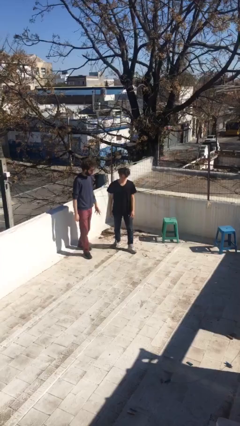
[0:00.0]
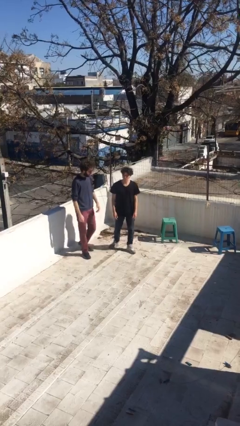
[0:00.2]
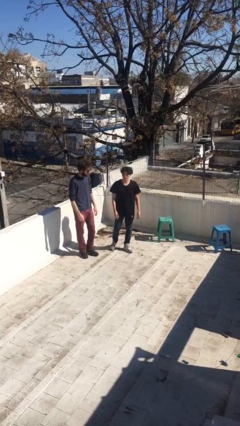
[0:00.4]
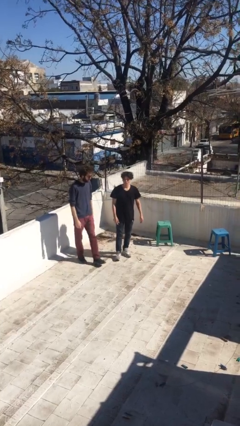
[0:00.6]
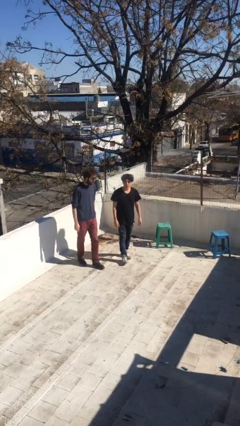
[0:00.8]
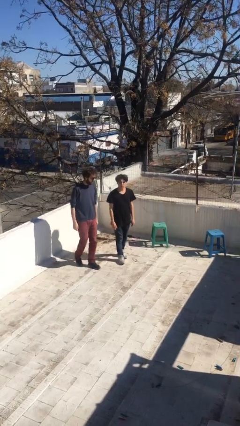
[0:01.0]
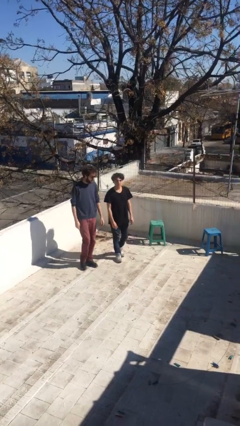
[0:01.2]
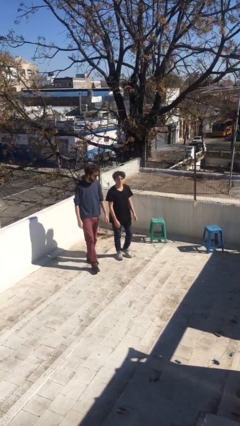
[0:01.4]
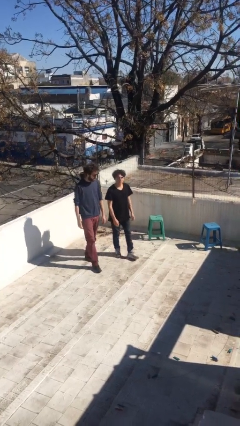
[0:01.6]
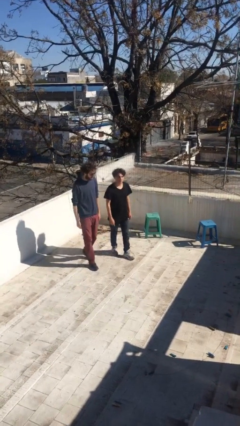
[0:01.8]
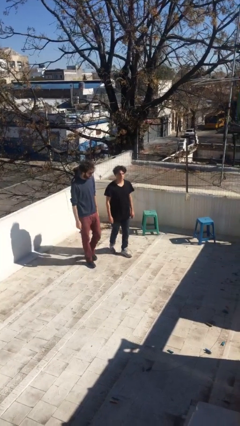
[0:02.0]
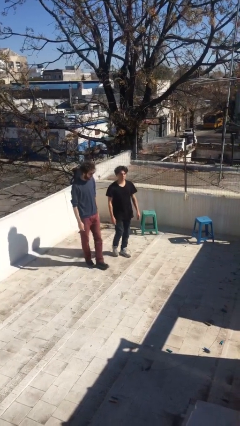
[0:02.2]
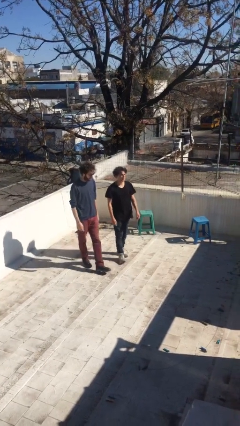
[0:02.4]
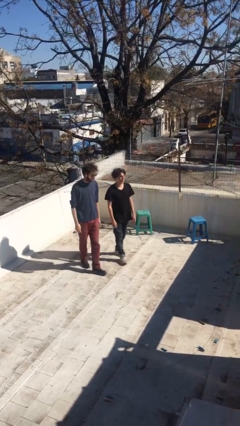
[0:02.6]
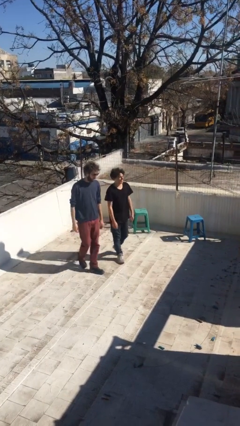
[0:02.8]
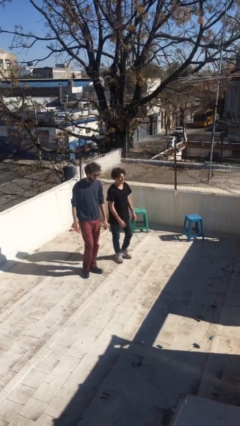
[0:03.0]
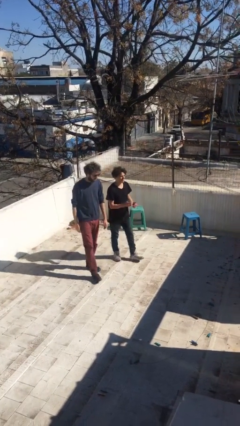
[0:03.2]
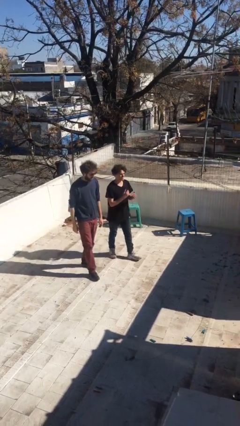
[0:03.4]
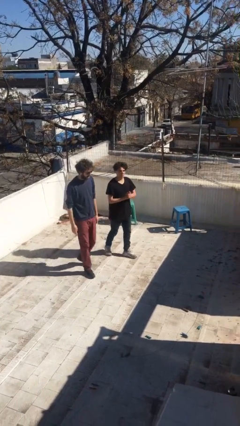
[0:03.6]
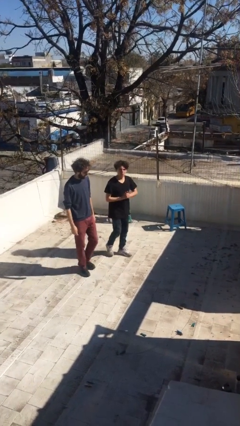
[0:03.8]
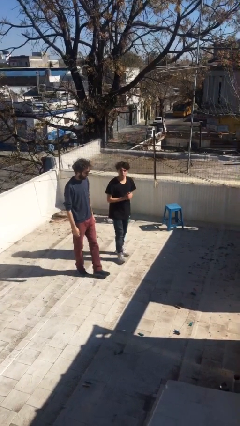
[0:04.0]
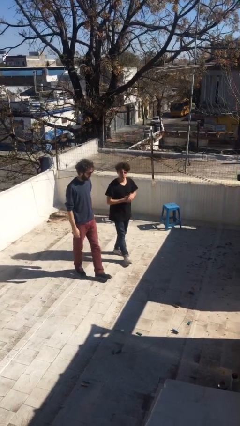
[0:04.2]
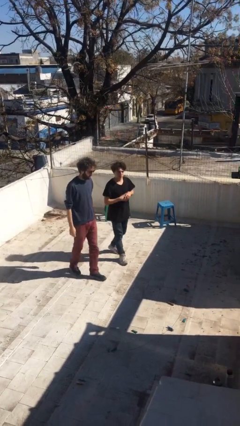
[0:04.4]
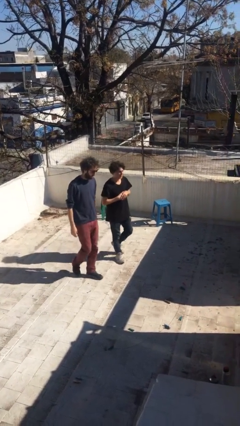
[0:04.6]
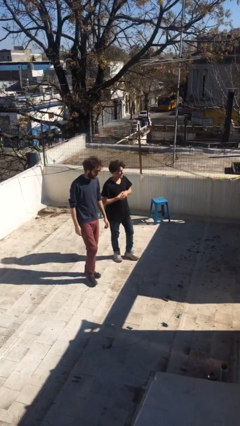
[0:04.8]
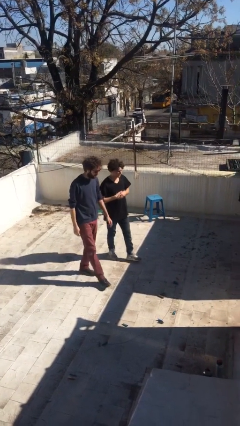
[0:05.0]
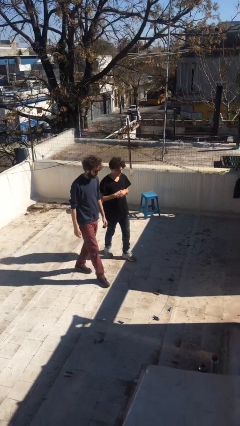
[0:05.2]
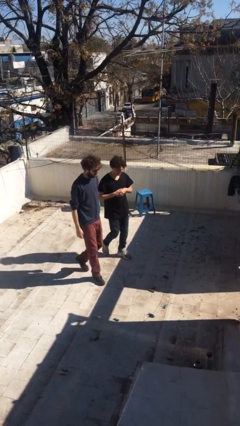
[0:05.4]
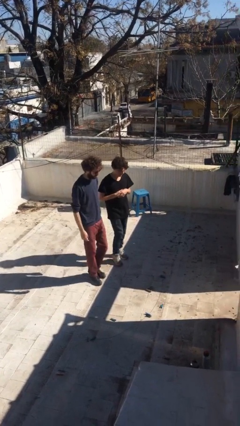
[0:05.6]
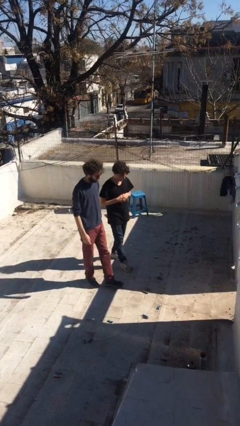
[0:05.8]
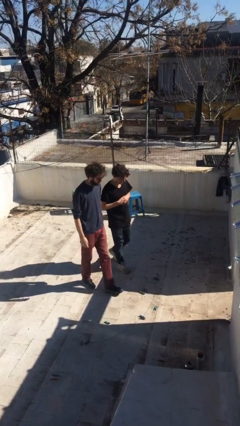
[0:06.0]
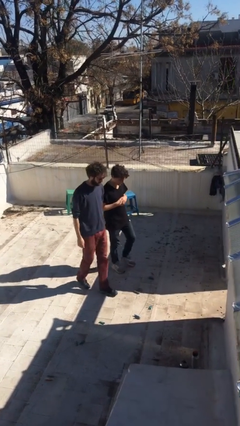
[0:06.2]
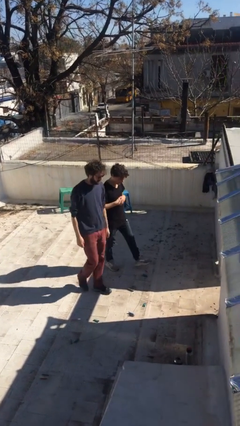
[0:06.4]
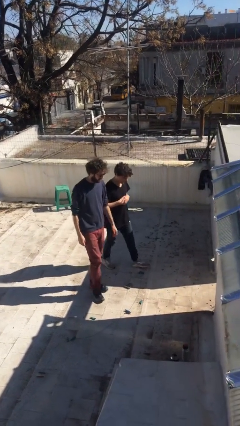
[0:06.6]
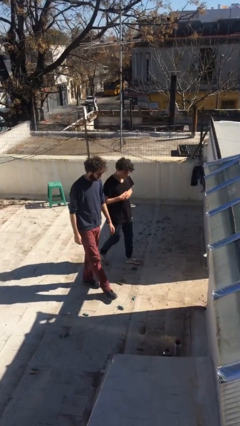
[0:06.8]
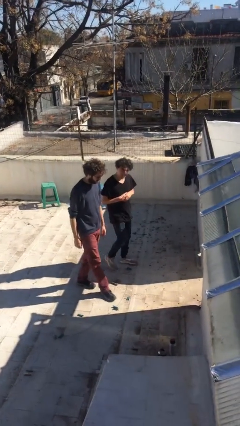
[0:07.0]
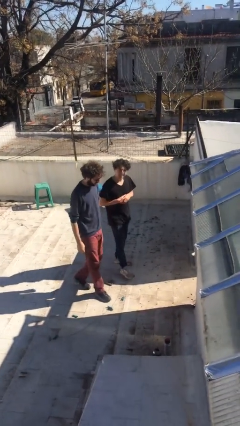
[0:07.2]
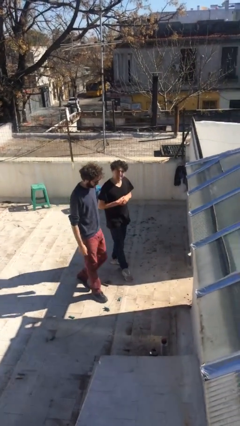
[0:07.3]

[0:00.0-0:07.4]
person talks to person

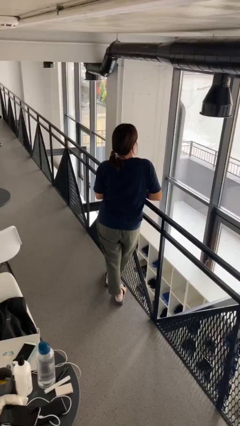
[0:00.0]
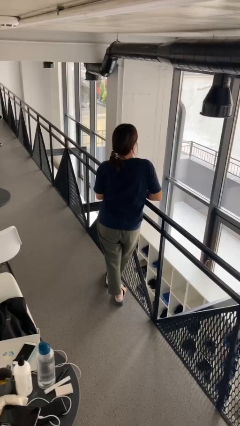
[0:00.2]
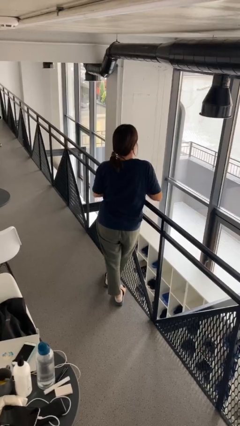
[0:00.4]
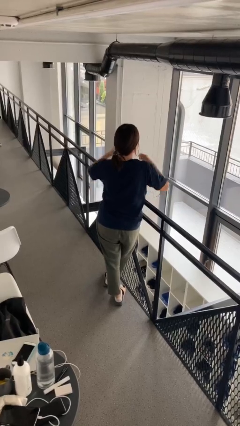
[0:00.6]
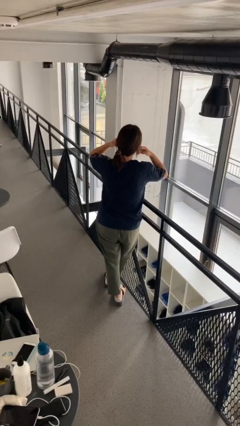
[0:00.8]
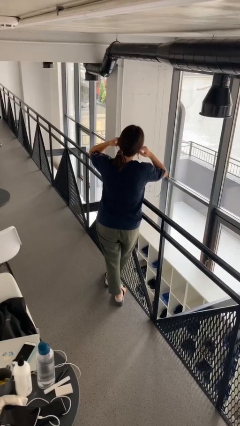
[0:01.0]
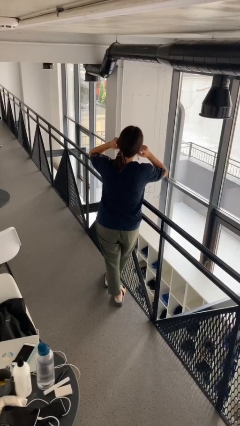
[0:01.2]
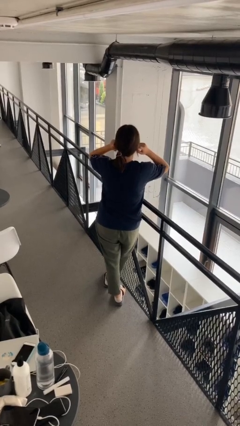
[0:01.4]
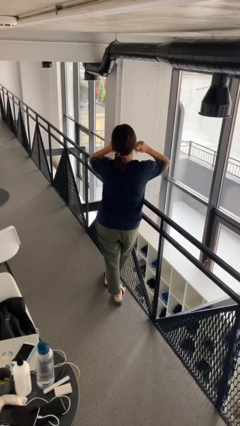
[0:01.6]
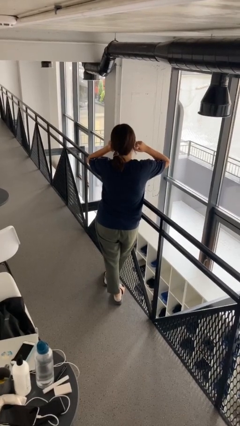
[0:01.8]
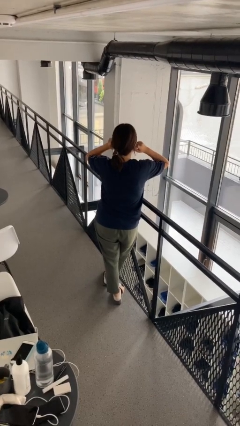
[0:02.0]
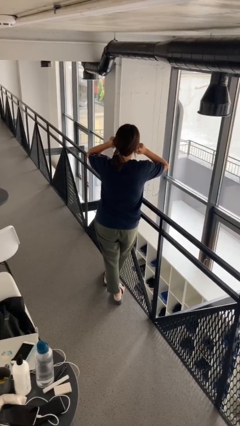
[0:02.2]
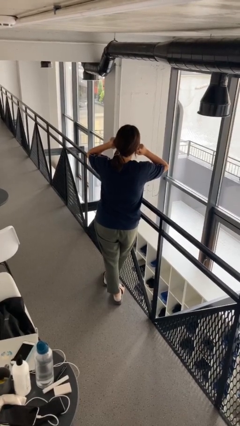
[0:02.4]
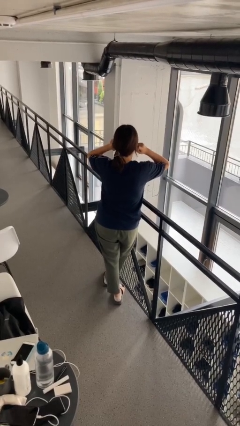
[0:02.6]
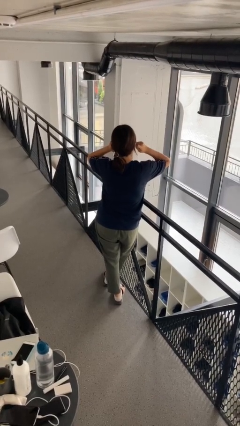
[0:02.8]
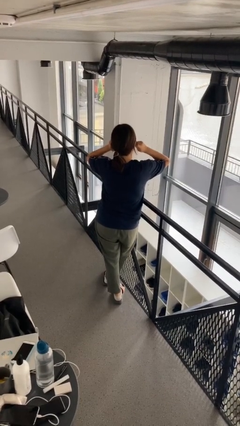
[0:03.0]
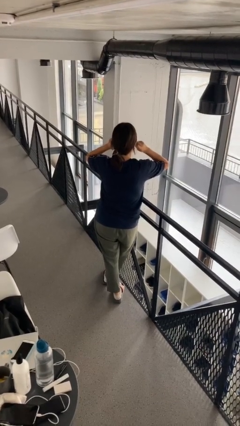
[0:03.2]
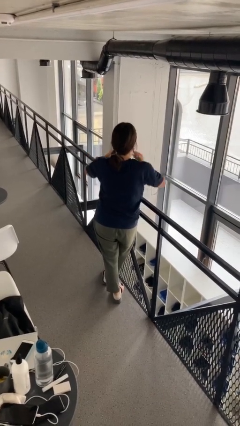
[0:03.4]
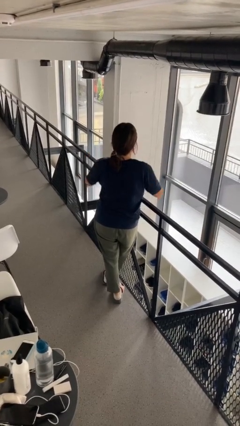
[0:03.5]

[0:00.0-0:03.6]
person puts fingers in ear

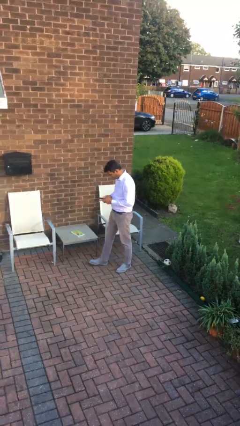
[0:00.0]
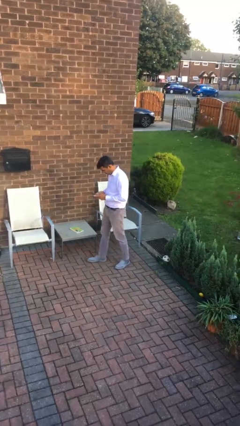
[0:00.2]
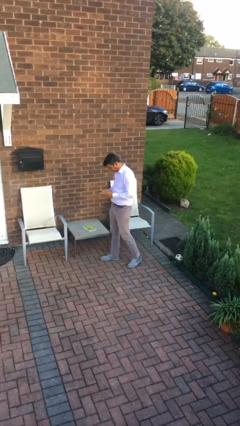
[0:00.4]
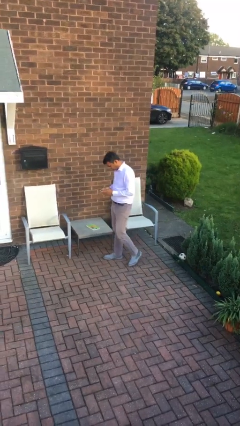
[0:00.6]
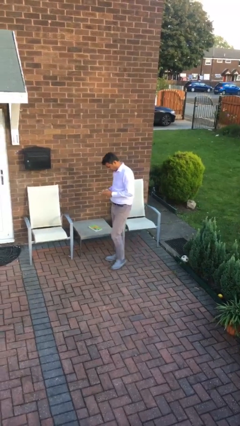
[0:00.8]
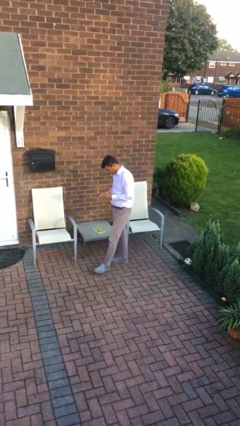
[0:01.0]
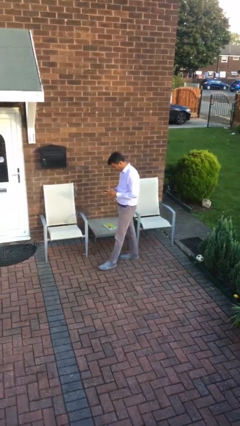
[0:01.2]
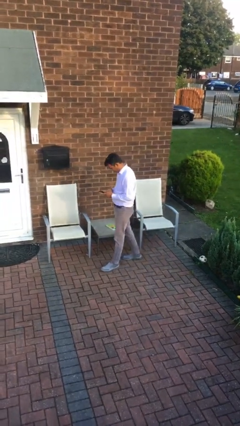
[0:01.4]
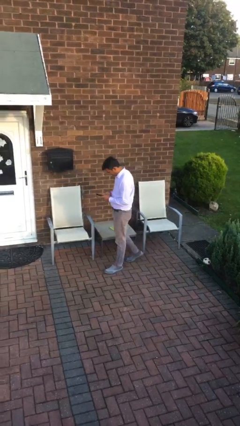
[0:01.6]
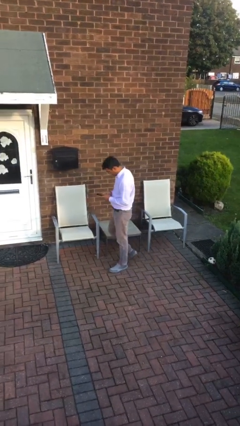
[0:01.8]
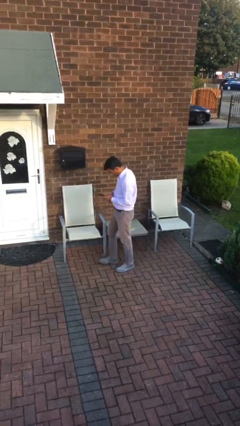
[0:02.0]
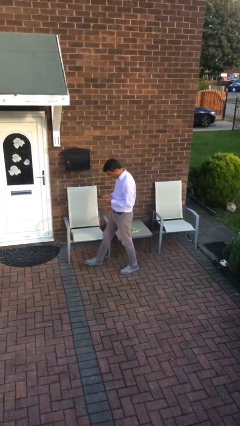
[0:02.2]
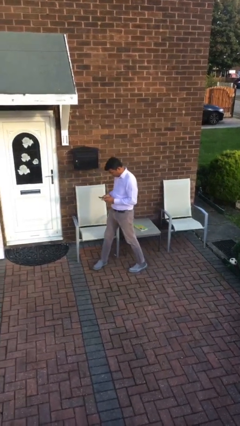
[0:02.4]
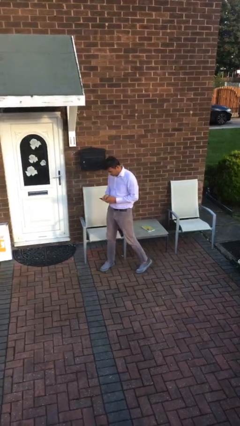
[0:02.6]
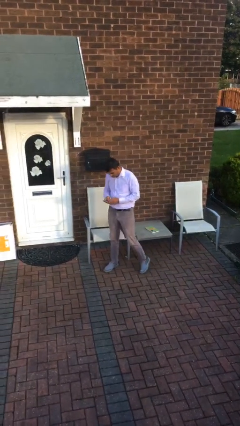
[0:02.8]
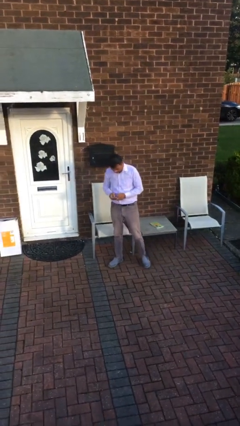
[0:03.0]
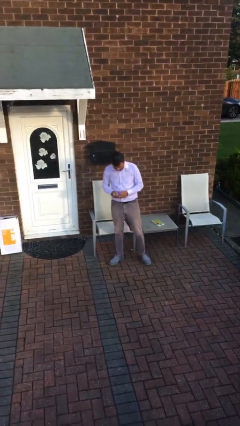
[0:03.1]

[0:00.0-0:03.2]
person texts on phone

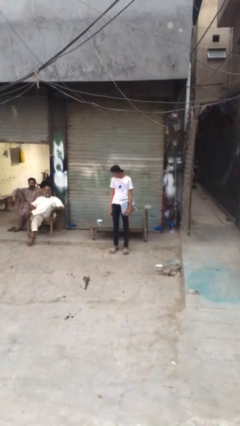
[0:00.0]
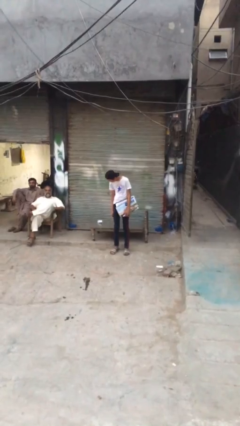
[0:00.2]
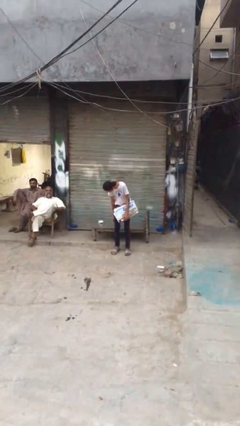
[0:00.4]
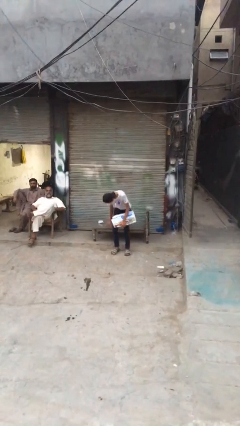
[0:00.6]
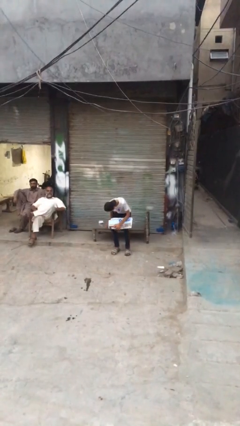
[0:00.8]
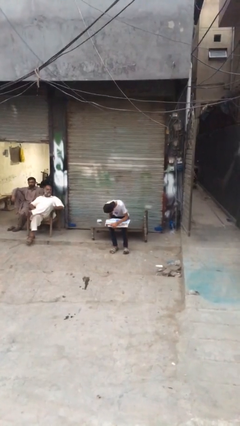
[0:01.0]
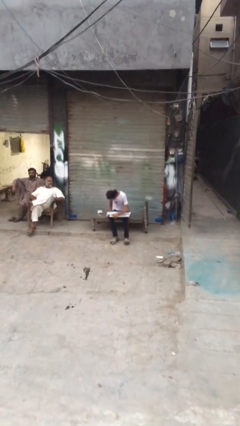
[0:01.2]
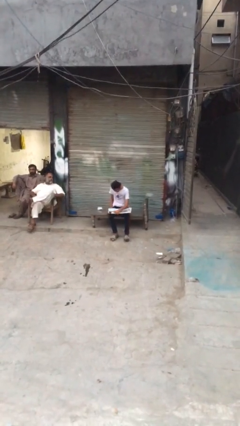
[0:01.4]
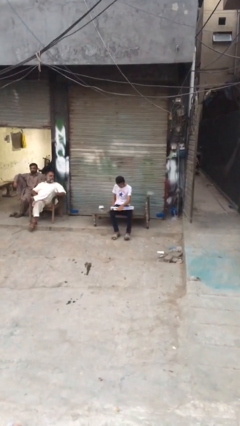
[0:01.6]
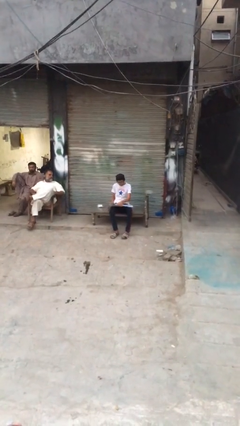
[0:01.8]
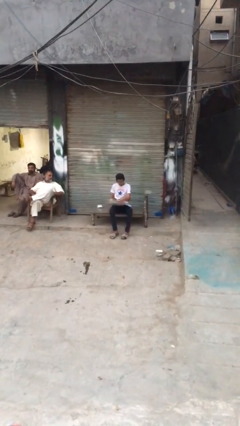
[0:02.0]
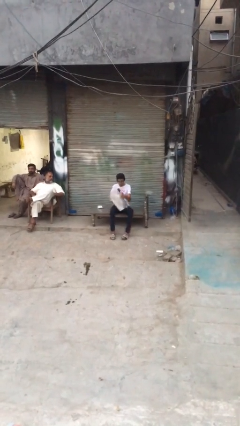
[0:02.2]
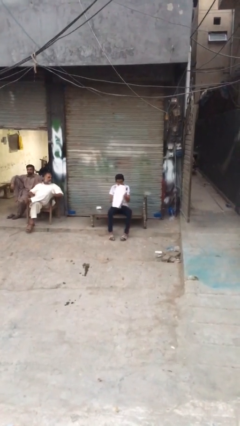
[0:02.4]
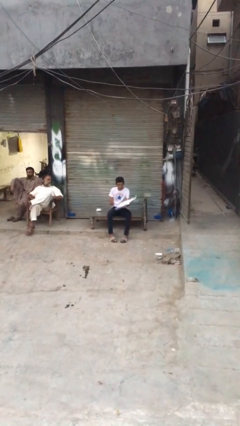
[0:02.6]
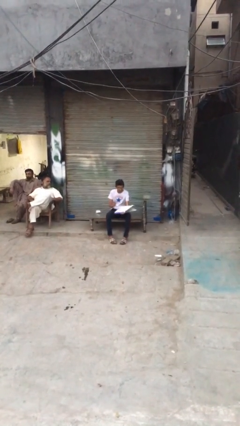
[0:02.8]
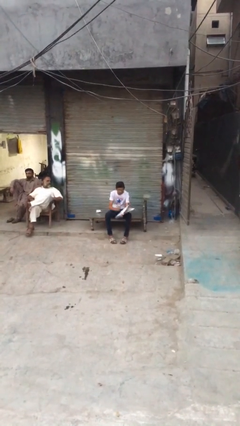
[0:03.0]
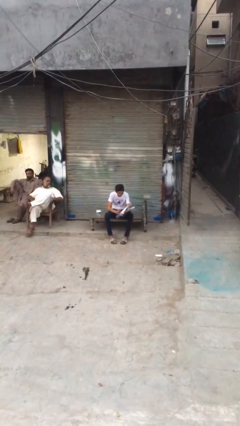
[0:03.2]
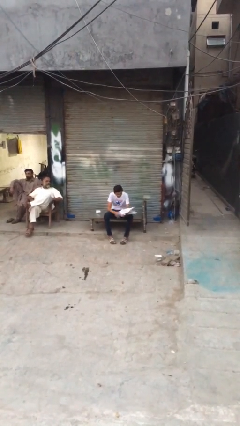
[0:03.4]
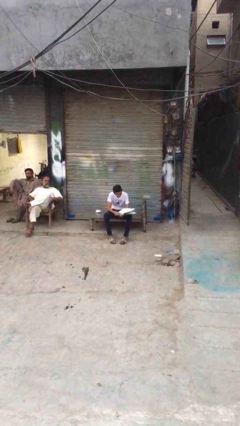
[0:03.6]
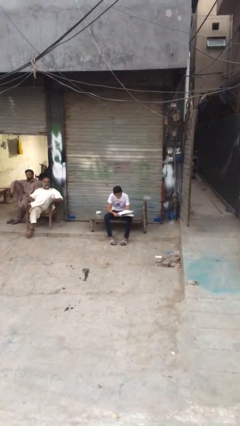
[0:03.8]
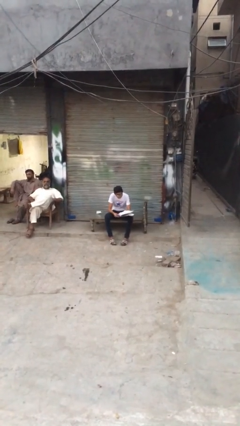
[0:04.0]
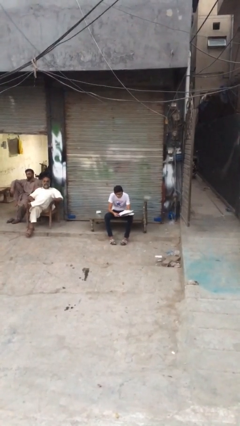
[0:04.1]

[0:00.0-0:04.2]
person sits down
